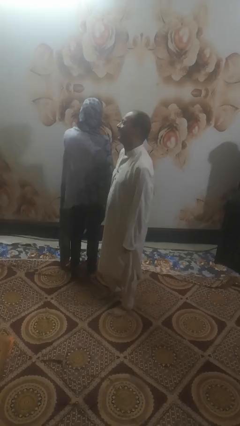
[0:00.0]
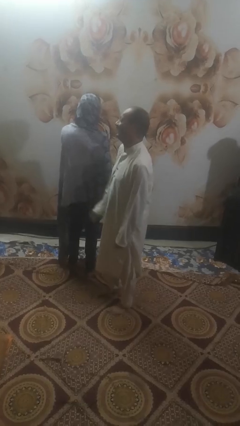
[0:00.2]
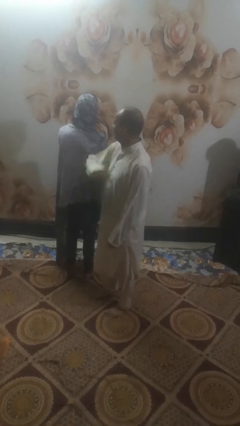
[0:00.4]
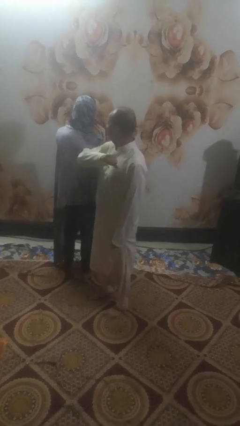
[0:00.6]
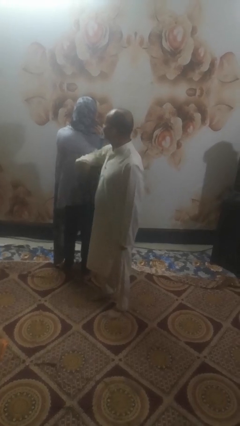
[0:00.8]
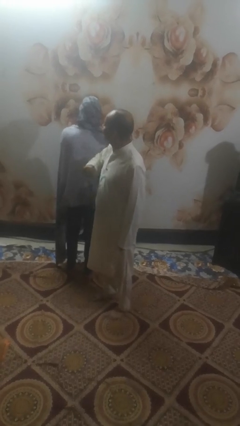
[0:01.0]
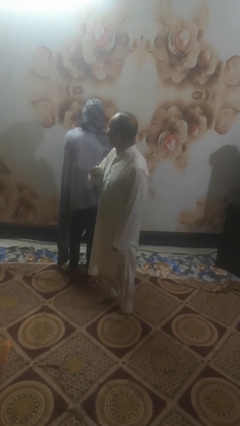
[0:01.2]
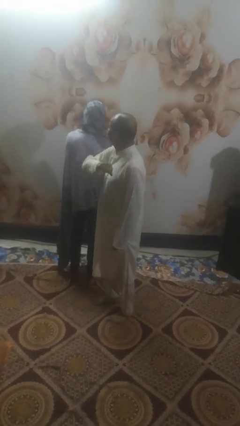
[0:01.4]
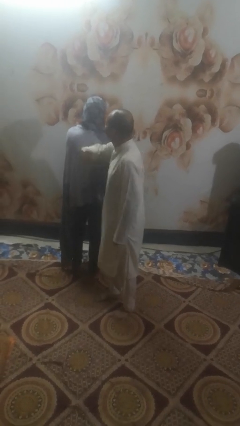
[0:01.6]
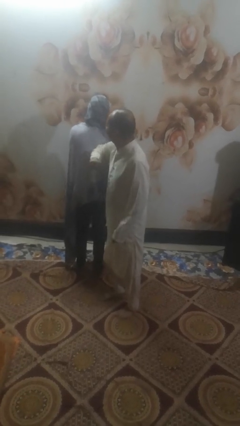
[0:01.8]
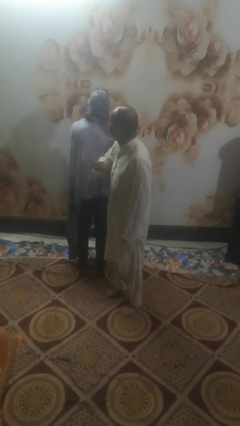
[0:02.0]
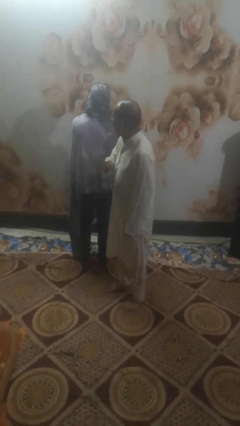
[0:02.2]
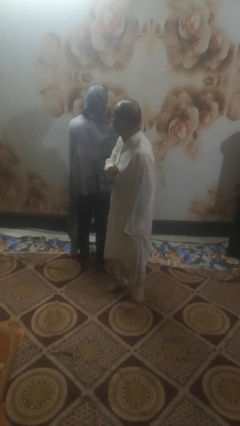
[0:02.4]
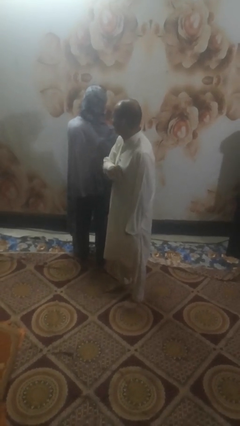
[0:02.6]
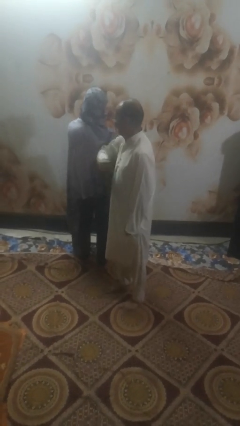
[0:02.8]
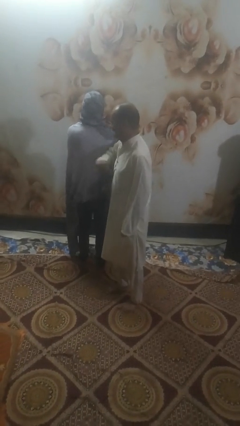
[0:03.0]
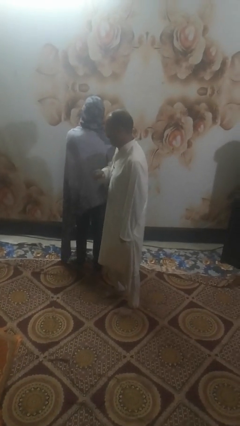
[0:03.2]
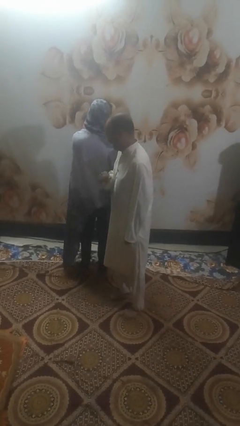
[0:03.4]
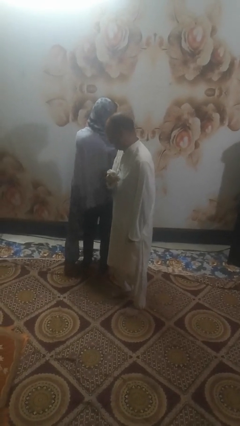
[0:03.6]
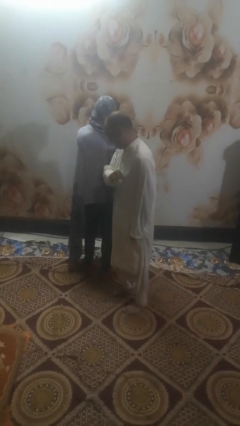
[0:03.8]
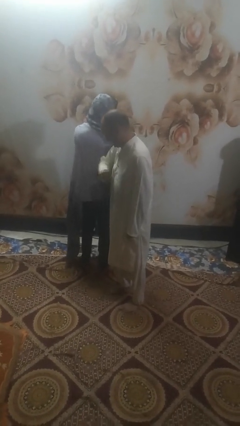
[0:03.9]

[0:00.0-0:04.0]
person nudges person with elbow

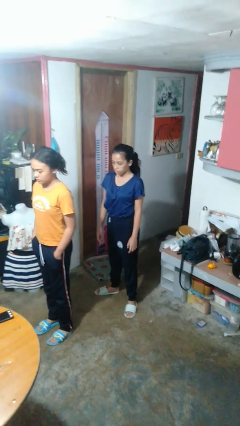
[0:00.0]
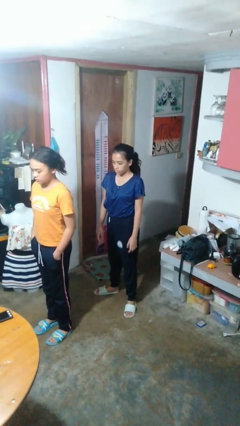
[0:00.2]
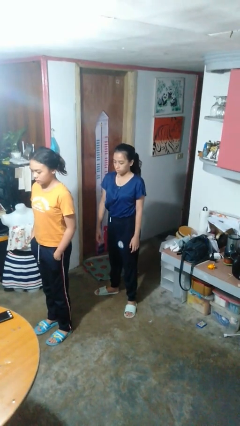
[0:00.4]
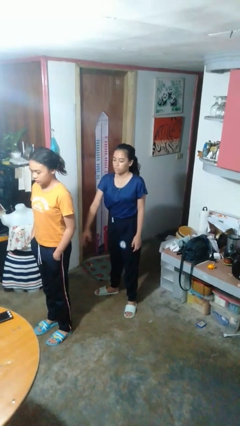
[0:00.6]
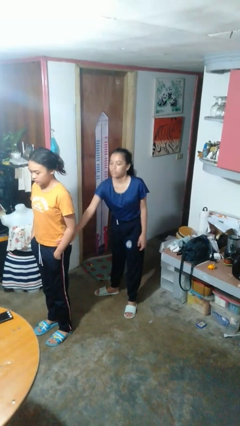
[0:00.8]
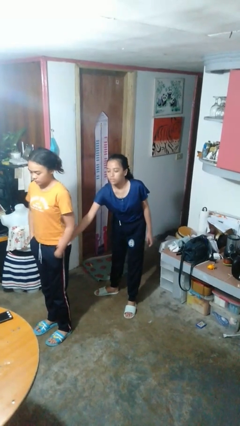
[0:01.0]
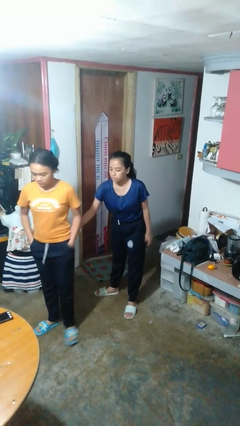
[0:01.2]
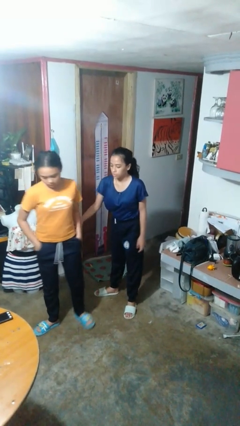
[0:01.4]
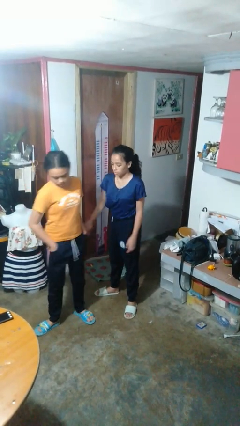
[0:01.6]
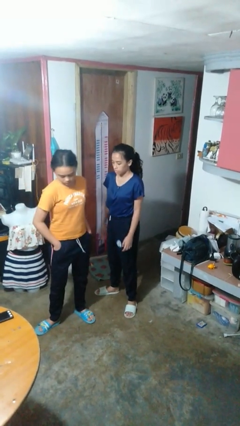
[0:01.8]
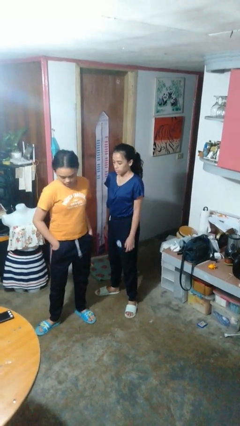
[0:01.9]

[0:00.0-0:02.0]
person grabs person by forearm

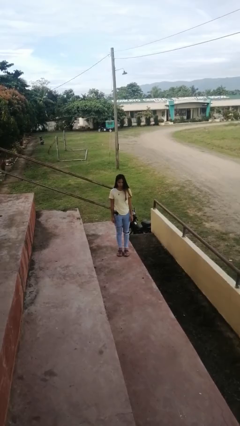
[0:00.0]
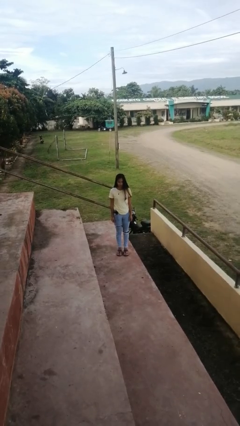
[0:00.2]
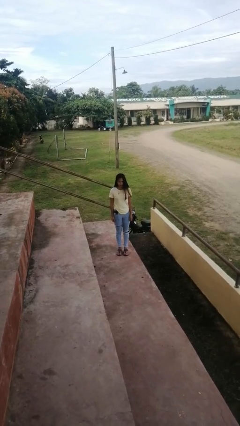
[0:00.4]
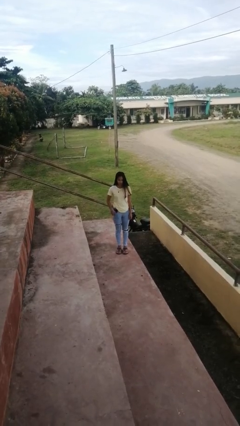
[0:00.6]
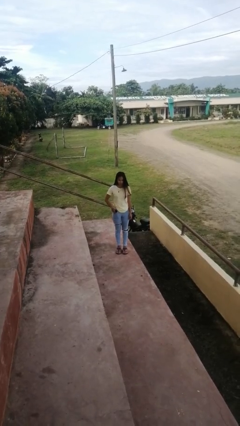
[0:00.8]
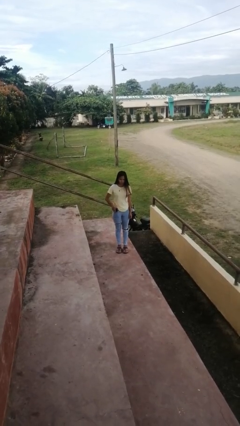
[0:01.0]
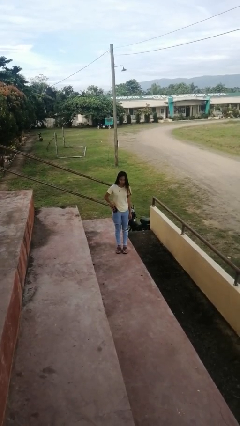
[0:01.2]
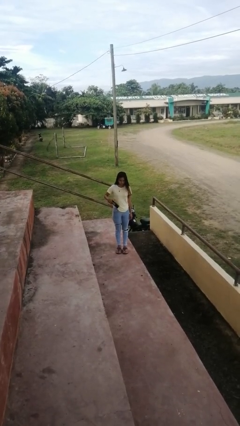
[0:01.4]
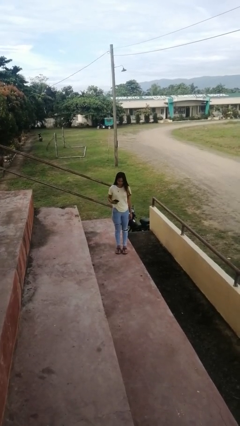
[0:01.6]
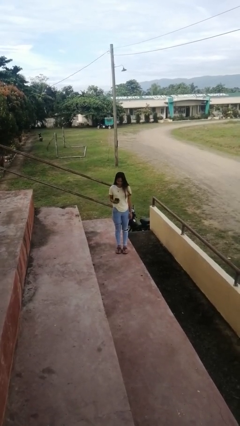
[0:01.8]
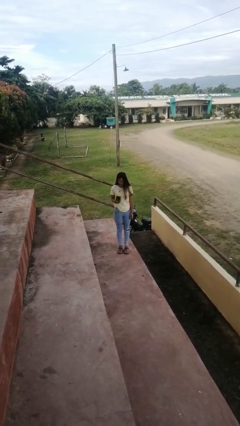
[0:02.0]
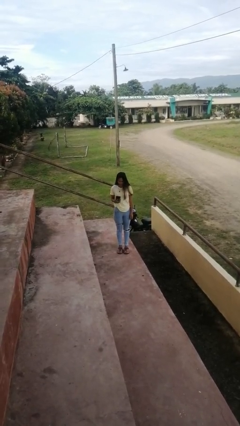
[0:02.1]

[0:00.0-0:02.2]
person takes phone from pocket

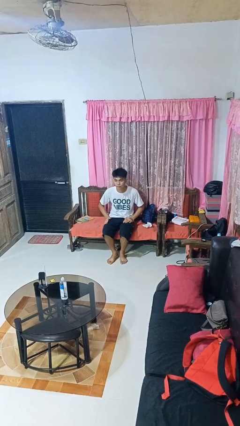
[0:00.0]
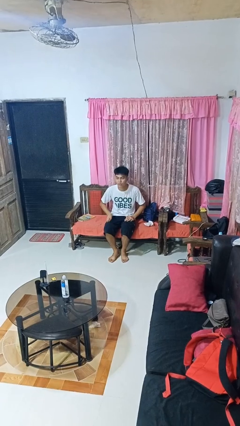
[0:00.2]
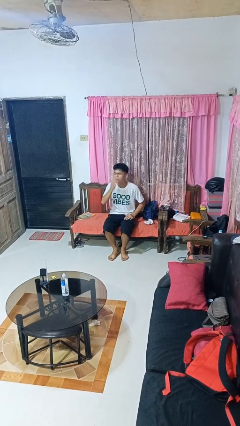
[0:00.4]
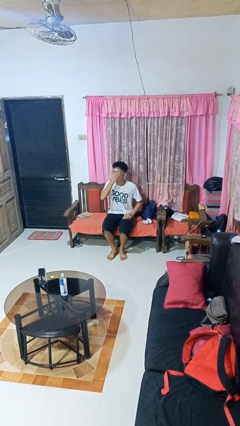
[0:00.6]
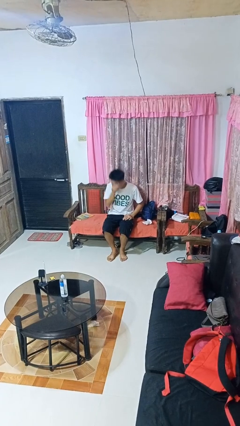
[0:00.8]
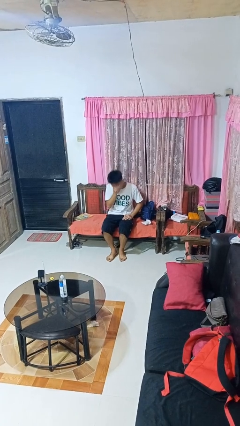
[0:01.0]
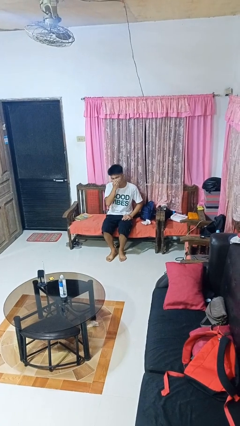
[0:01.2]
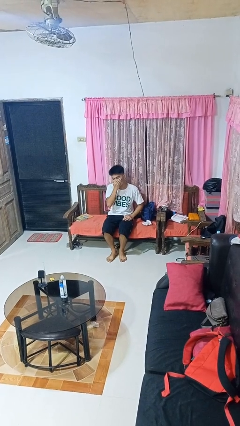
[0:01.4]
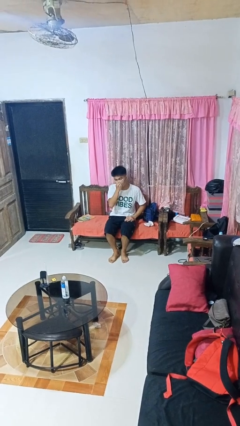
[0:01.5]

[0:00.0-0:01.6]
person sneezes into hand

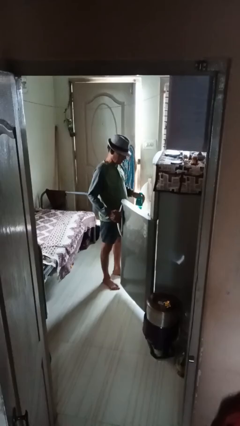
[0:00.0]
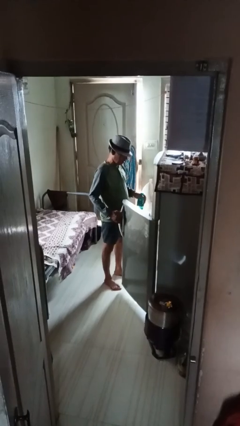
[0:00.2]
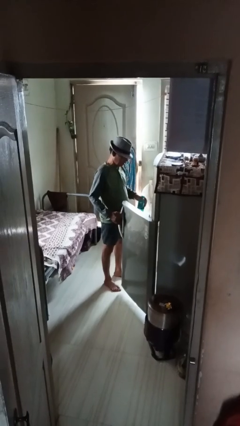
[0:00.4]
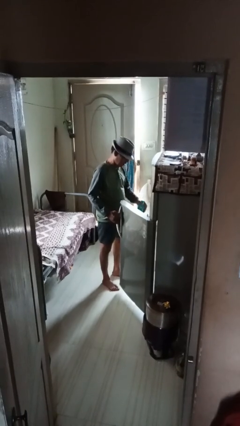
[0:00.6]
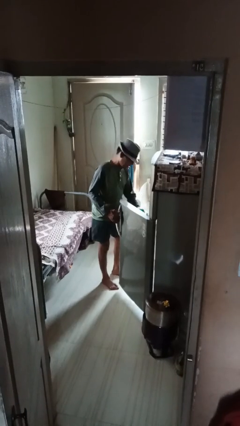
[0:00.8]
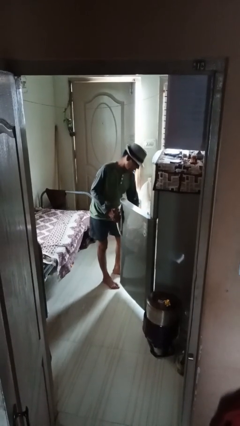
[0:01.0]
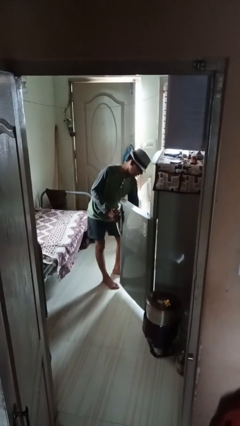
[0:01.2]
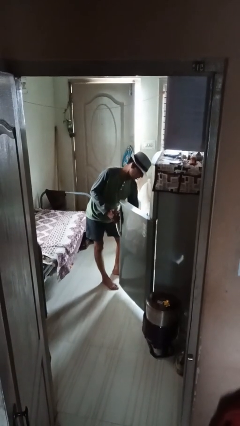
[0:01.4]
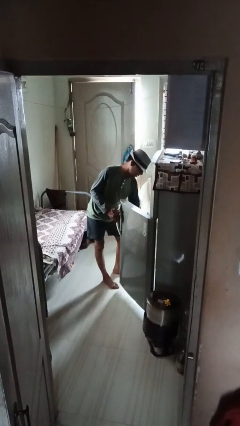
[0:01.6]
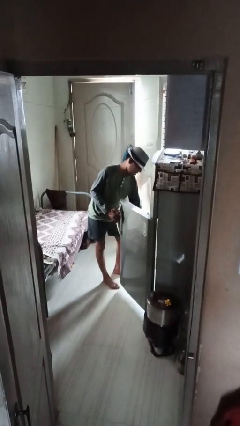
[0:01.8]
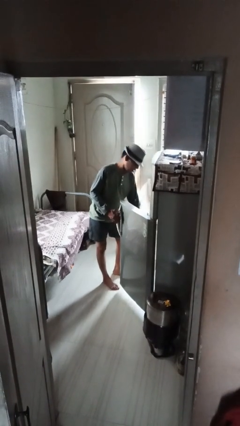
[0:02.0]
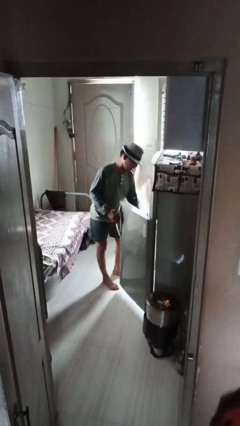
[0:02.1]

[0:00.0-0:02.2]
person puts object into refrigerator

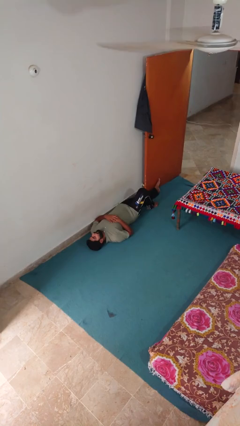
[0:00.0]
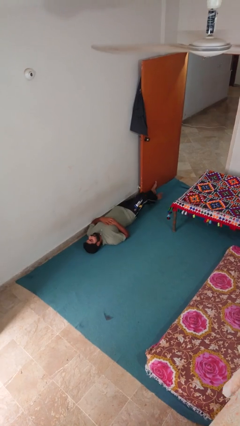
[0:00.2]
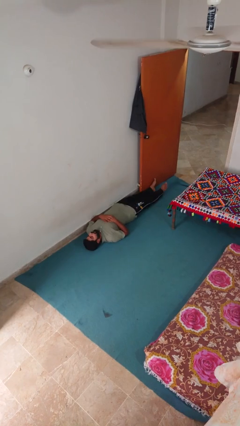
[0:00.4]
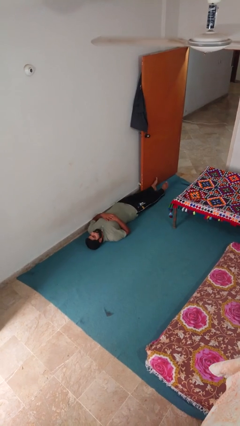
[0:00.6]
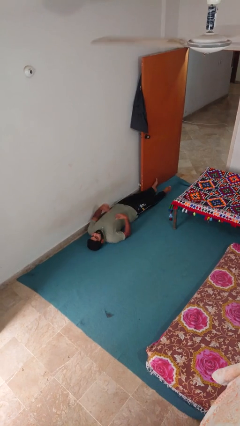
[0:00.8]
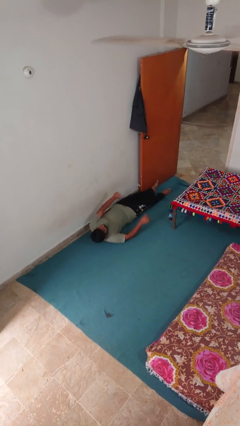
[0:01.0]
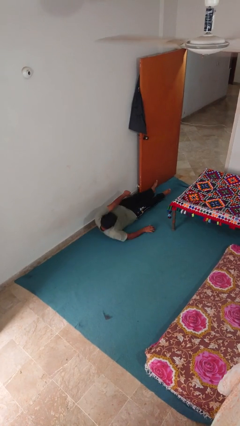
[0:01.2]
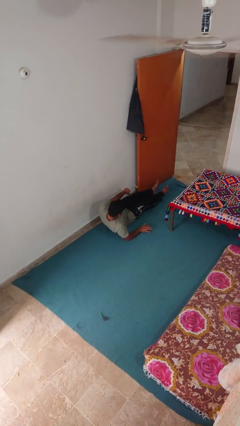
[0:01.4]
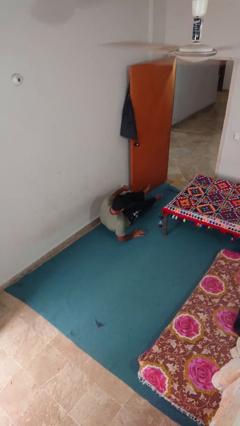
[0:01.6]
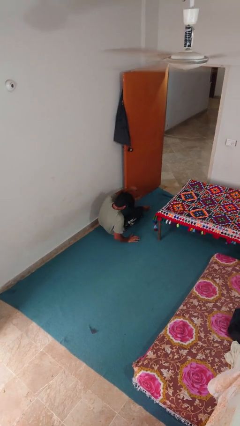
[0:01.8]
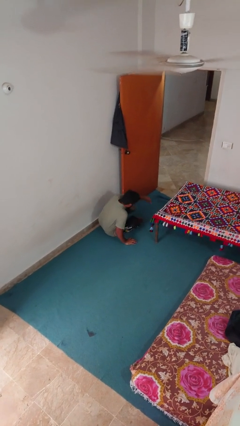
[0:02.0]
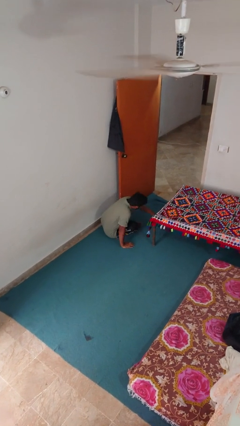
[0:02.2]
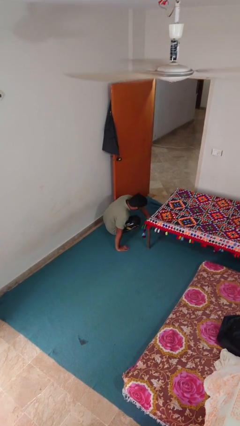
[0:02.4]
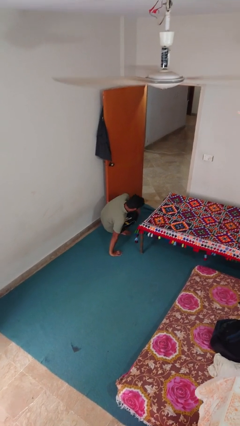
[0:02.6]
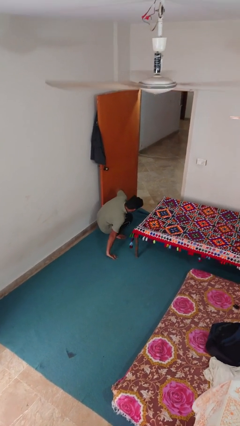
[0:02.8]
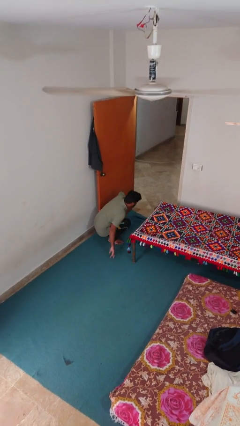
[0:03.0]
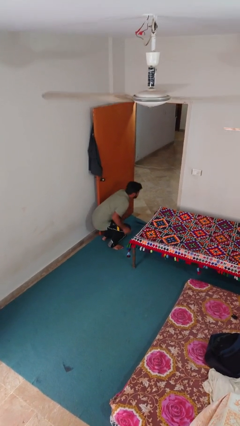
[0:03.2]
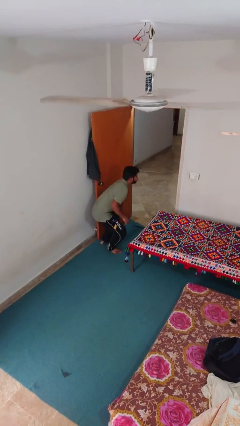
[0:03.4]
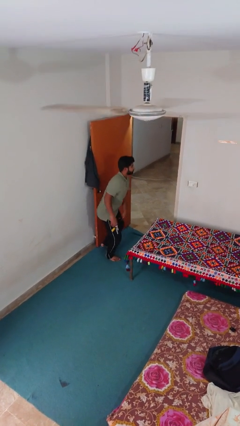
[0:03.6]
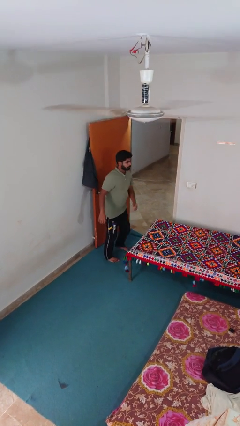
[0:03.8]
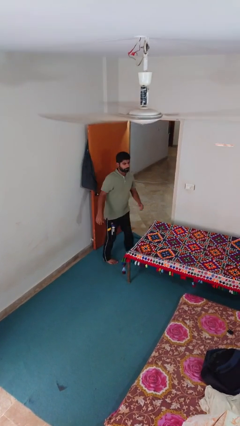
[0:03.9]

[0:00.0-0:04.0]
person stands up from floor

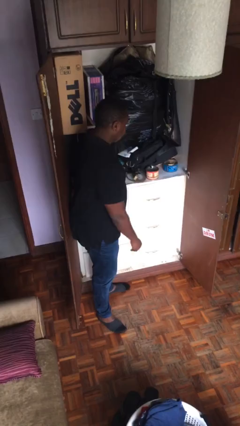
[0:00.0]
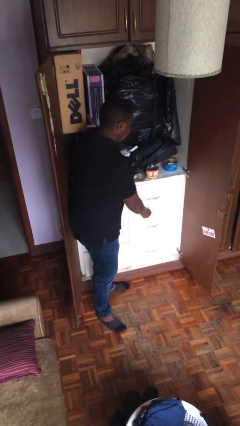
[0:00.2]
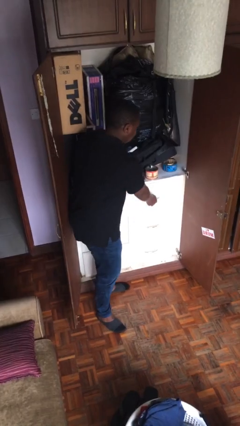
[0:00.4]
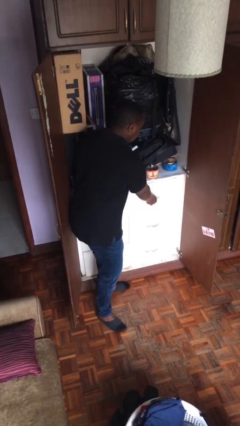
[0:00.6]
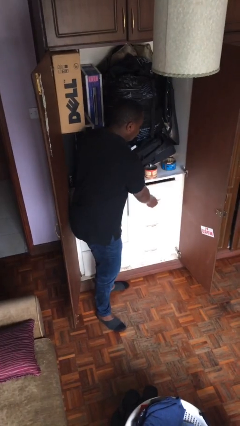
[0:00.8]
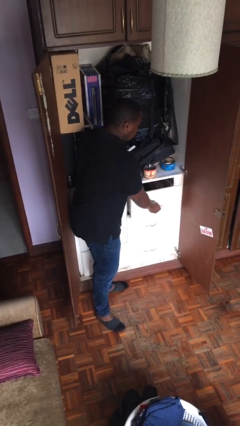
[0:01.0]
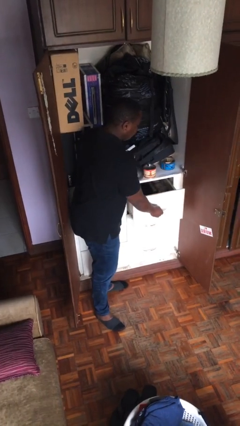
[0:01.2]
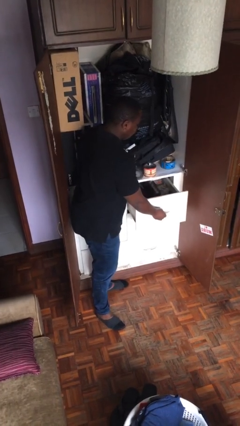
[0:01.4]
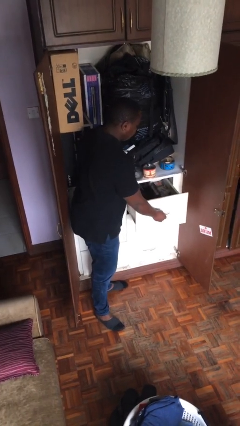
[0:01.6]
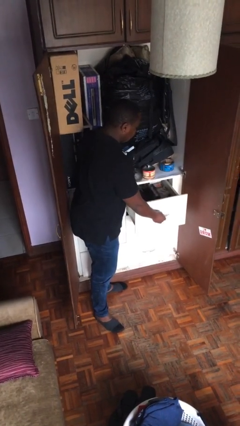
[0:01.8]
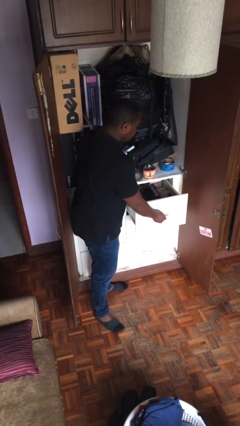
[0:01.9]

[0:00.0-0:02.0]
person opens dresser drawer
